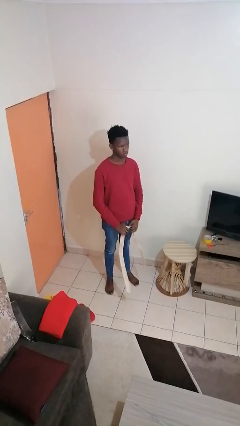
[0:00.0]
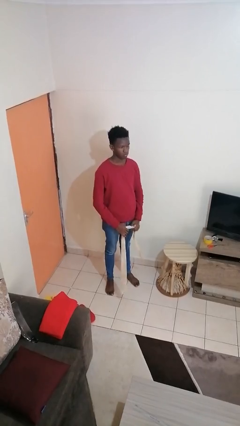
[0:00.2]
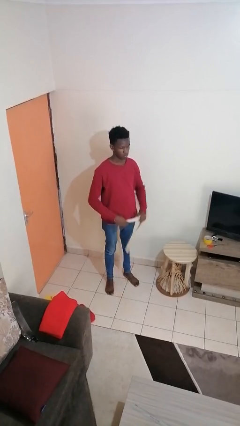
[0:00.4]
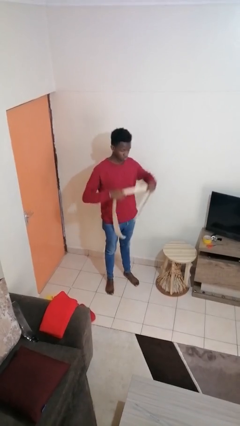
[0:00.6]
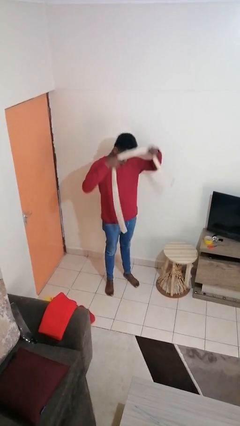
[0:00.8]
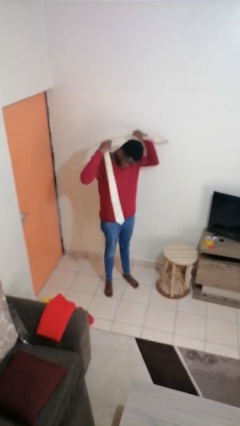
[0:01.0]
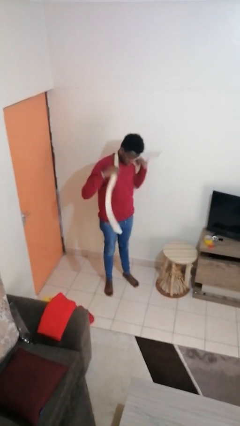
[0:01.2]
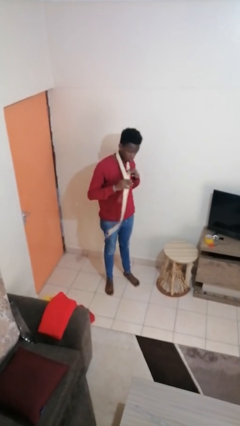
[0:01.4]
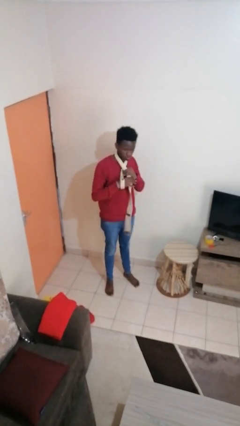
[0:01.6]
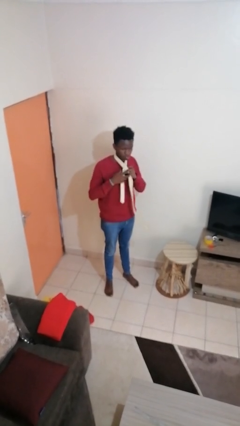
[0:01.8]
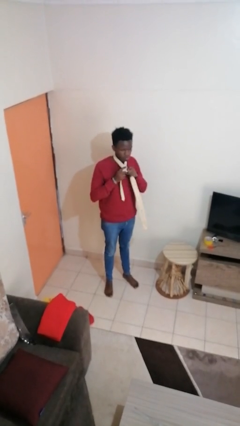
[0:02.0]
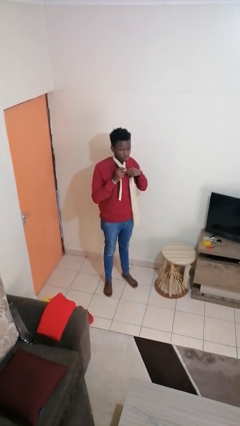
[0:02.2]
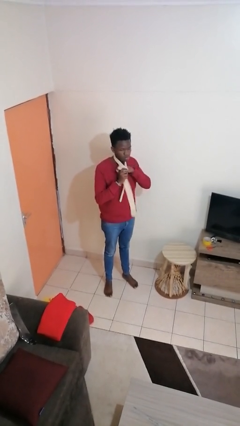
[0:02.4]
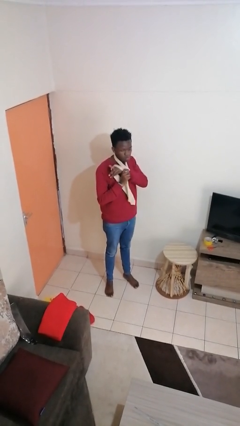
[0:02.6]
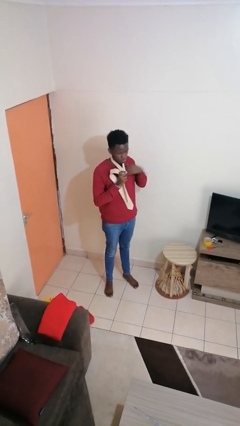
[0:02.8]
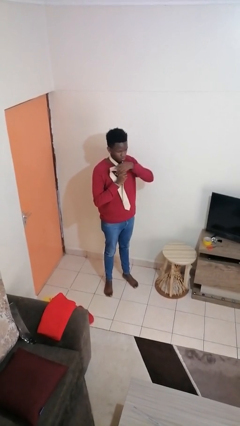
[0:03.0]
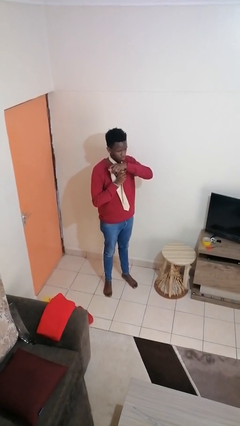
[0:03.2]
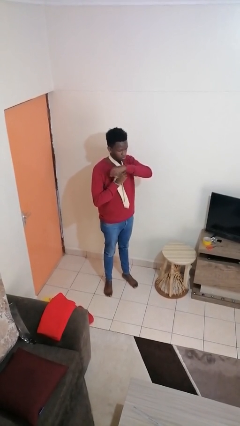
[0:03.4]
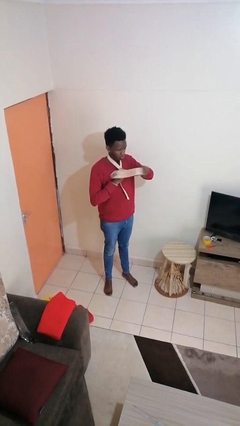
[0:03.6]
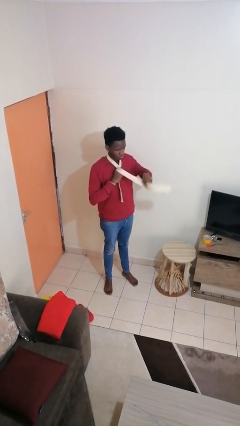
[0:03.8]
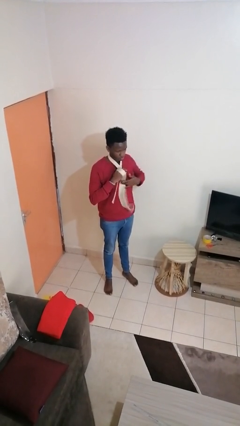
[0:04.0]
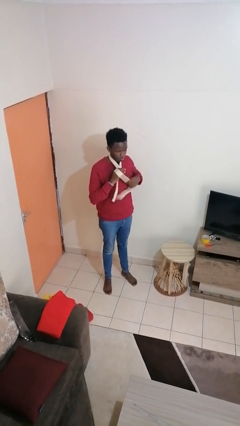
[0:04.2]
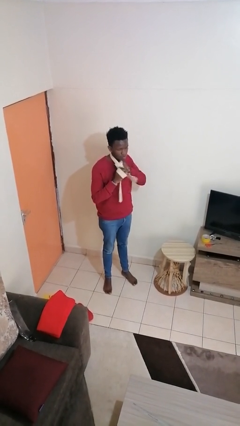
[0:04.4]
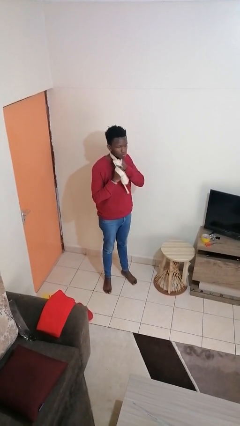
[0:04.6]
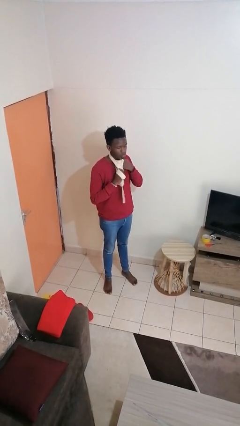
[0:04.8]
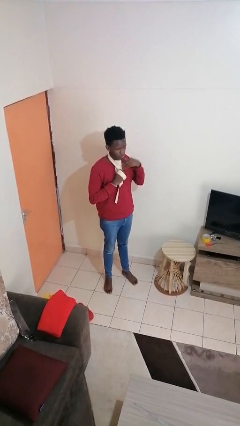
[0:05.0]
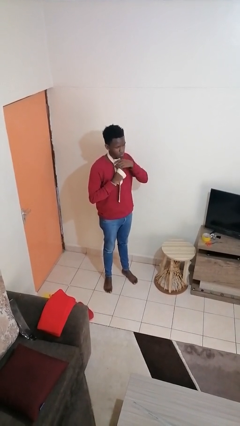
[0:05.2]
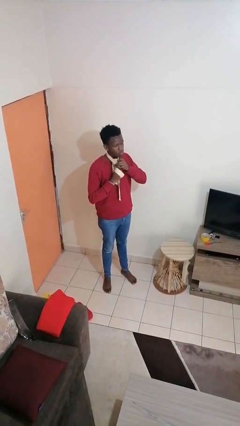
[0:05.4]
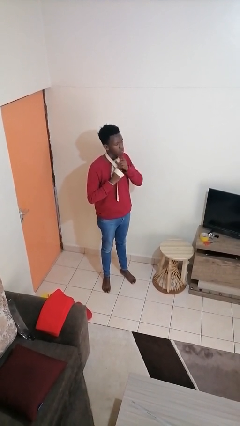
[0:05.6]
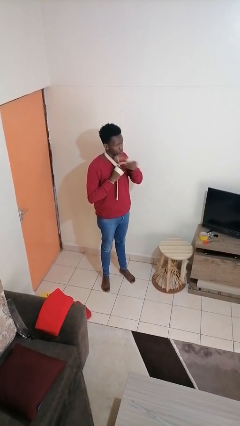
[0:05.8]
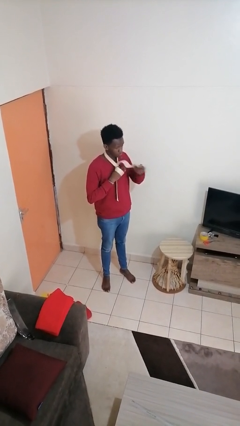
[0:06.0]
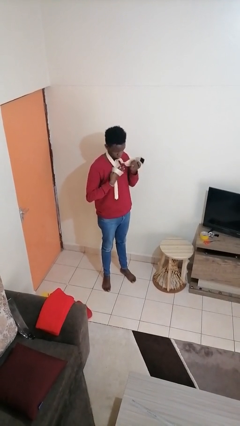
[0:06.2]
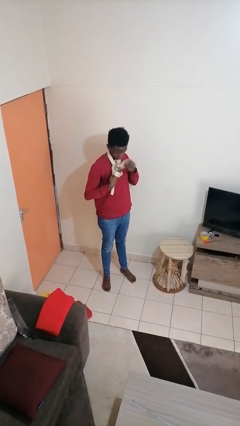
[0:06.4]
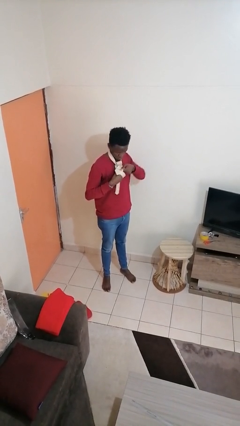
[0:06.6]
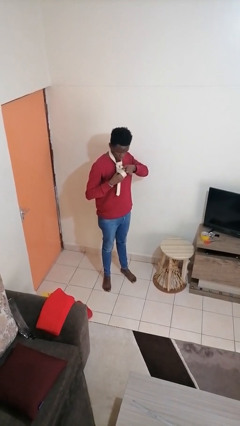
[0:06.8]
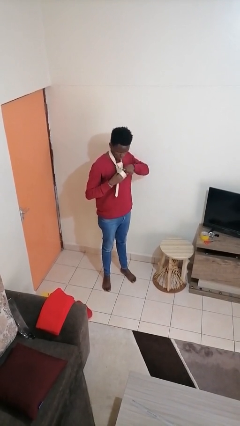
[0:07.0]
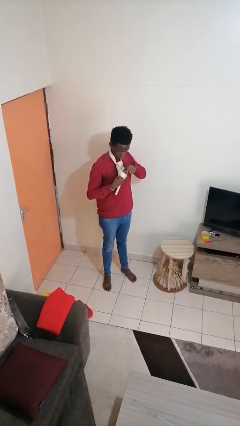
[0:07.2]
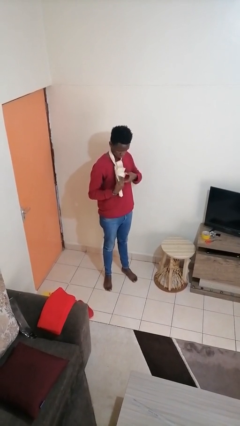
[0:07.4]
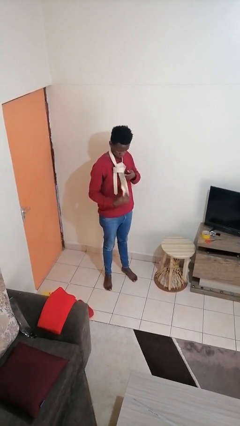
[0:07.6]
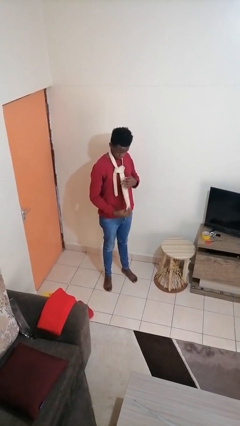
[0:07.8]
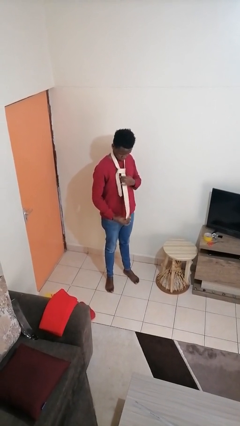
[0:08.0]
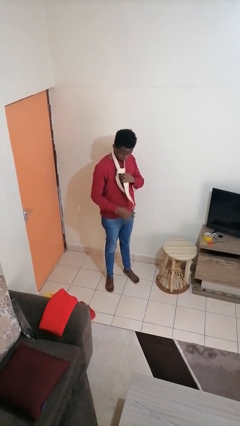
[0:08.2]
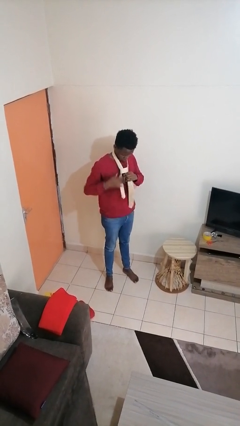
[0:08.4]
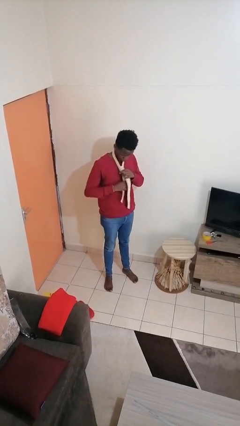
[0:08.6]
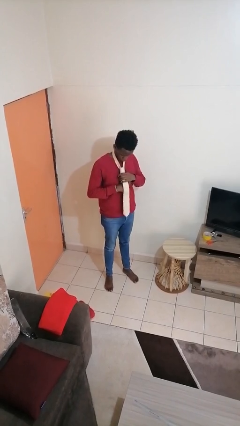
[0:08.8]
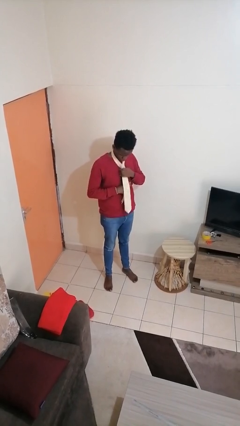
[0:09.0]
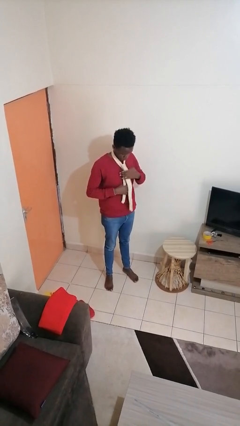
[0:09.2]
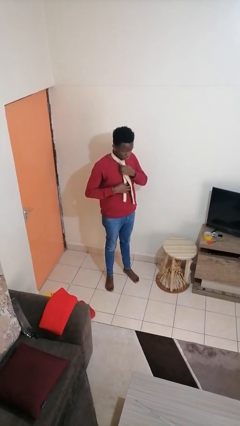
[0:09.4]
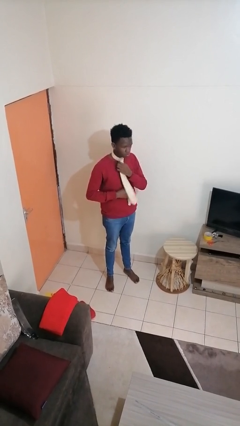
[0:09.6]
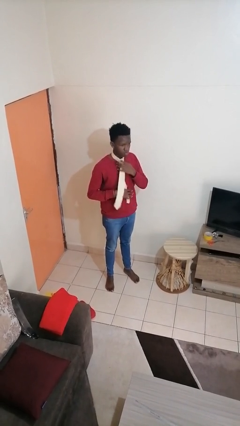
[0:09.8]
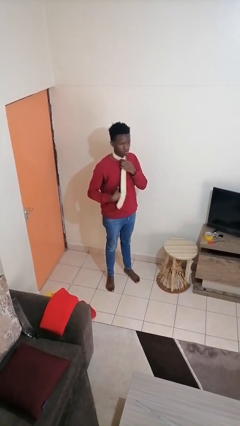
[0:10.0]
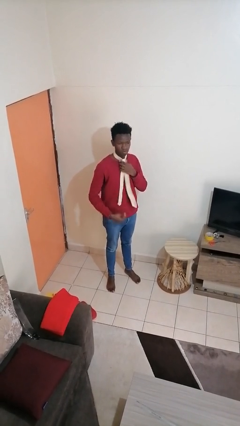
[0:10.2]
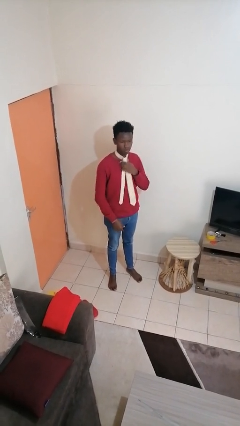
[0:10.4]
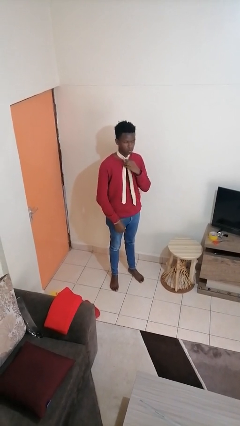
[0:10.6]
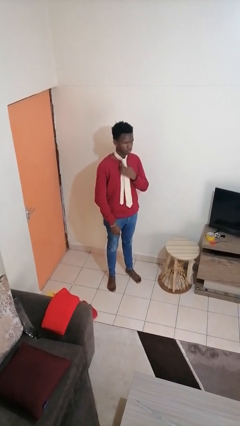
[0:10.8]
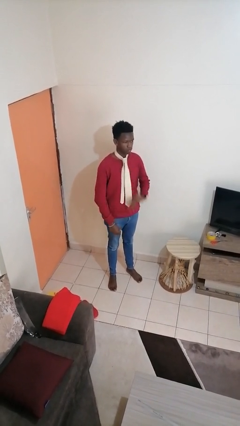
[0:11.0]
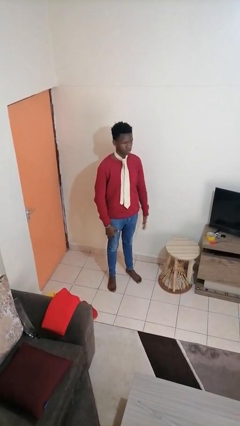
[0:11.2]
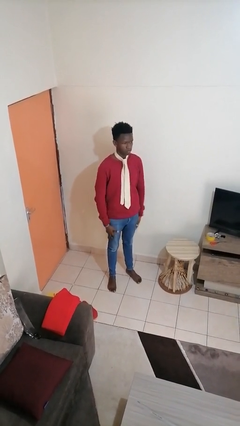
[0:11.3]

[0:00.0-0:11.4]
person puts on necktie

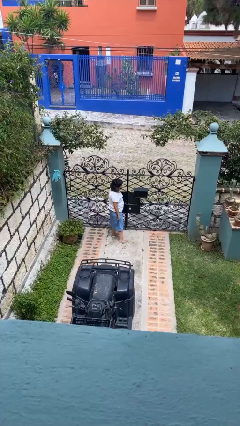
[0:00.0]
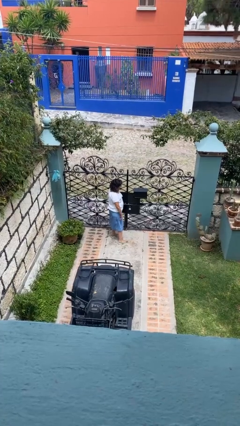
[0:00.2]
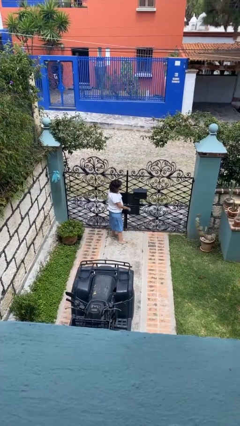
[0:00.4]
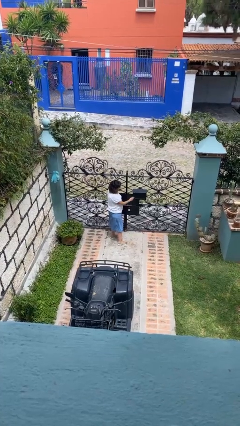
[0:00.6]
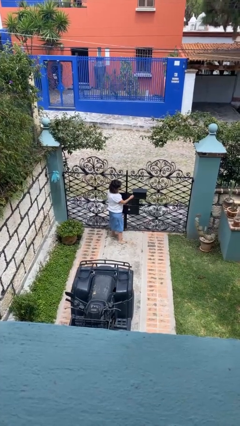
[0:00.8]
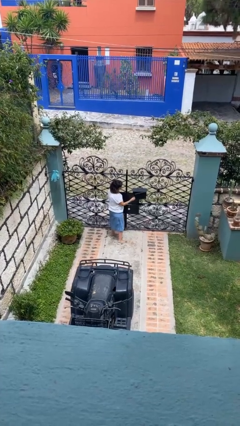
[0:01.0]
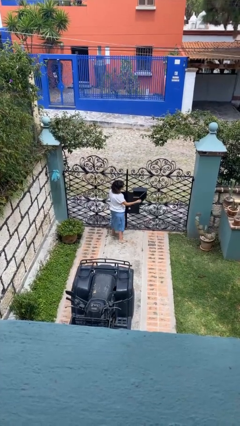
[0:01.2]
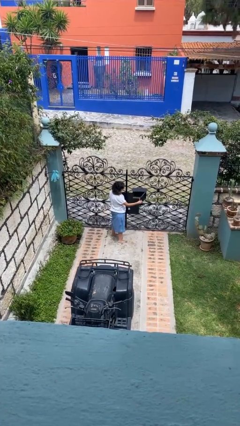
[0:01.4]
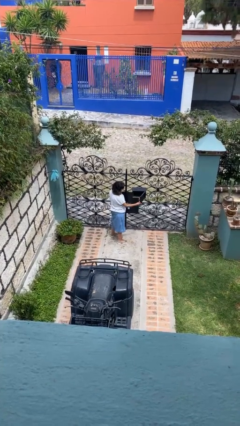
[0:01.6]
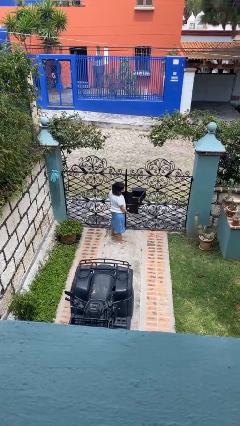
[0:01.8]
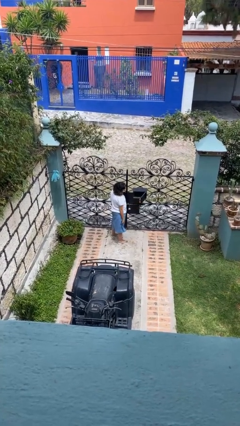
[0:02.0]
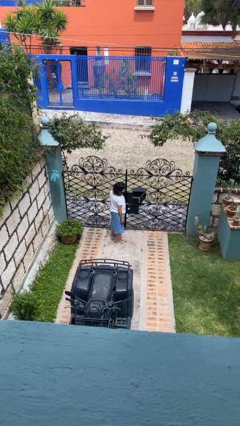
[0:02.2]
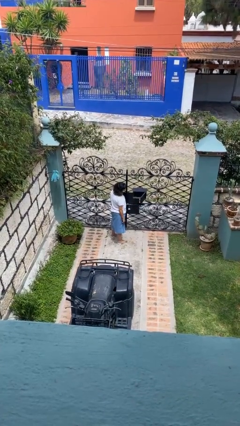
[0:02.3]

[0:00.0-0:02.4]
person opens mailbox

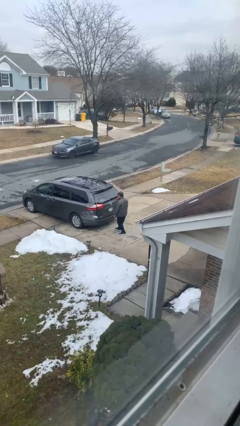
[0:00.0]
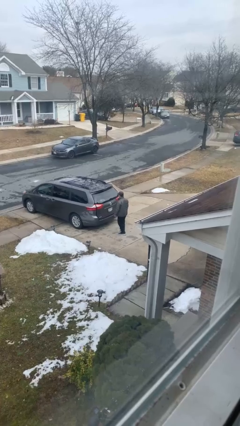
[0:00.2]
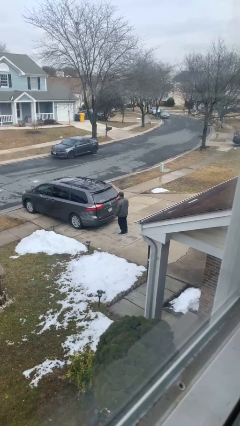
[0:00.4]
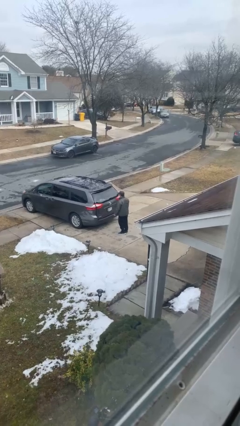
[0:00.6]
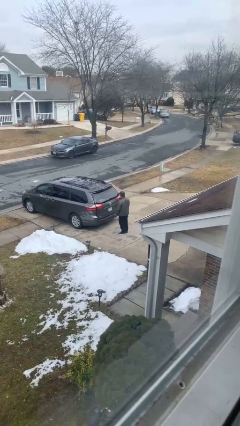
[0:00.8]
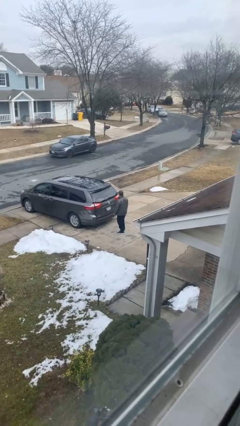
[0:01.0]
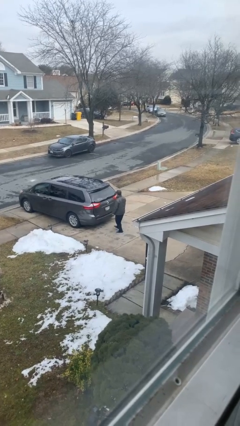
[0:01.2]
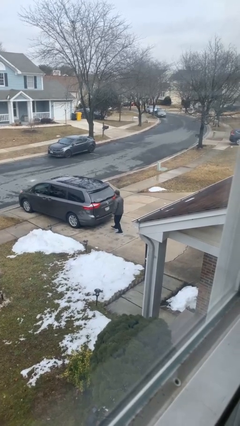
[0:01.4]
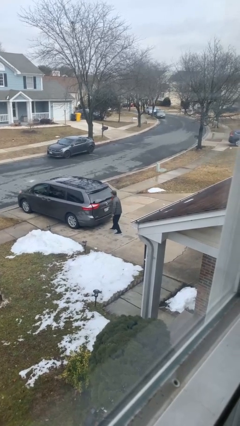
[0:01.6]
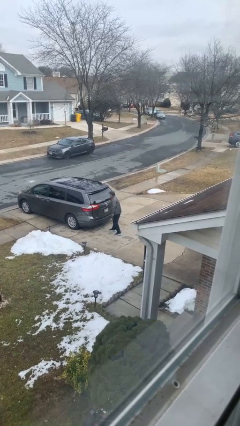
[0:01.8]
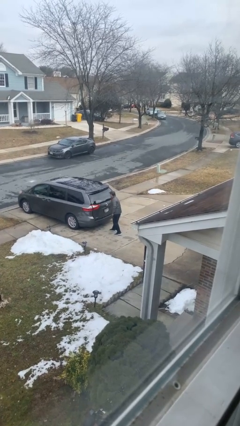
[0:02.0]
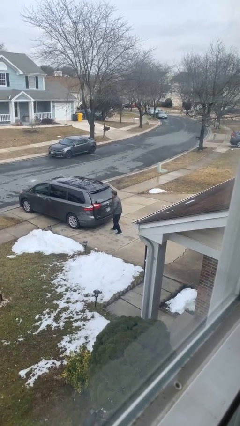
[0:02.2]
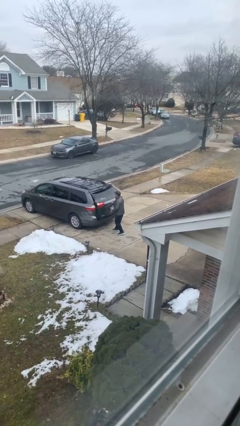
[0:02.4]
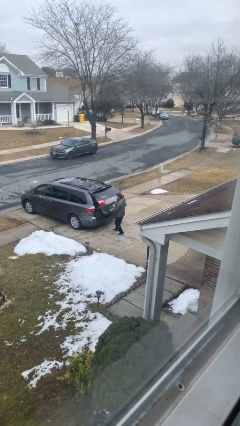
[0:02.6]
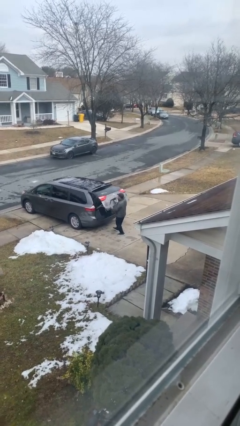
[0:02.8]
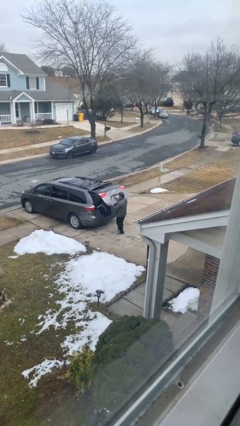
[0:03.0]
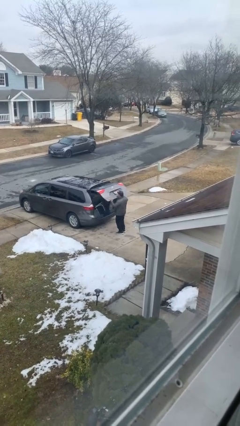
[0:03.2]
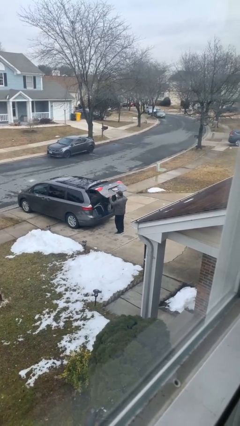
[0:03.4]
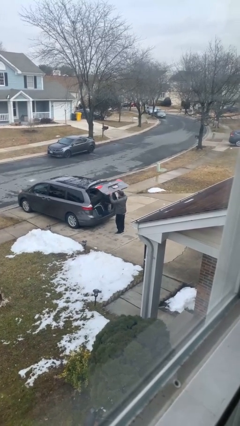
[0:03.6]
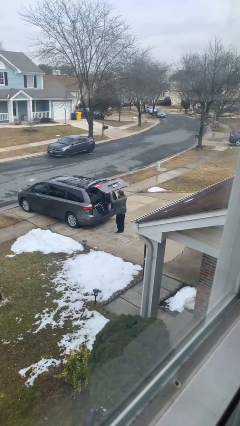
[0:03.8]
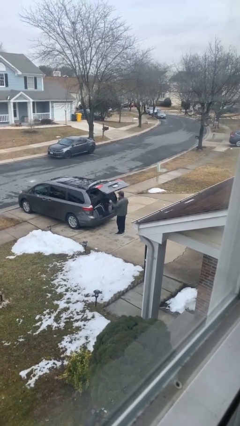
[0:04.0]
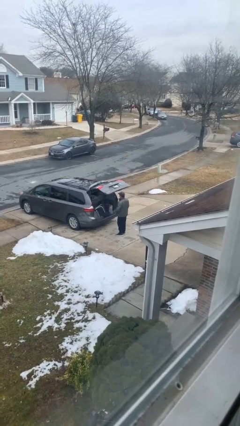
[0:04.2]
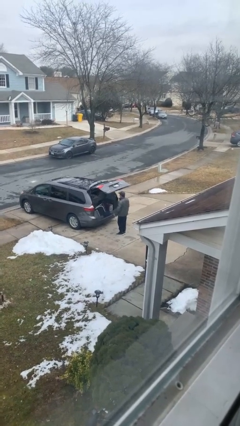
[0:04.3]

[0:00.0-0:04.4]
person opens car trunk
